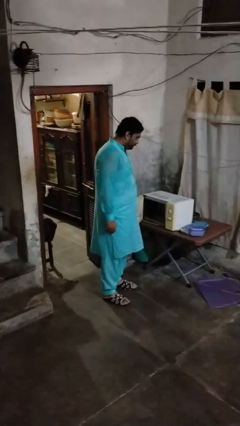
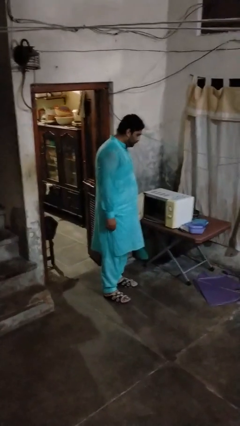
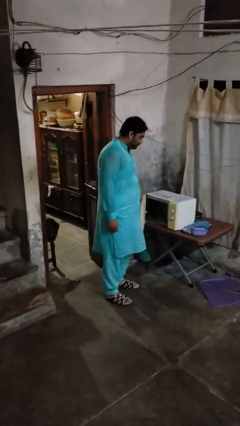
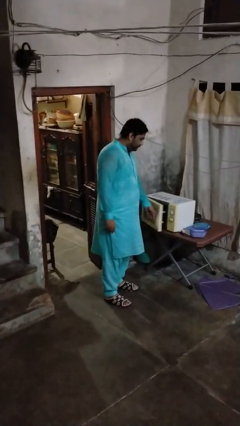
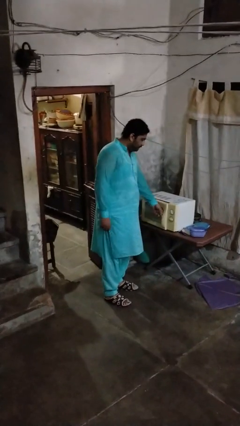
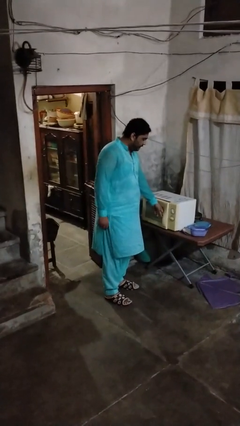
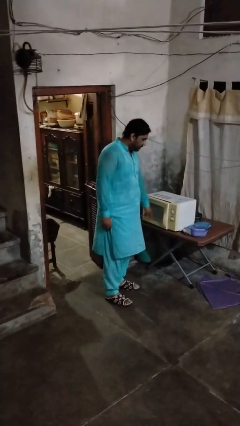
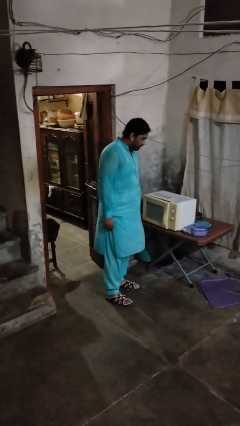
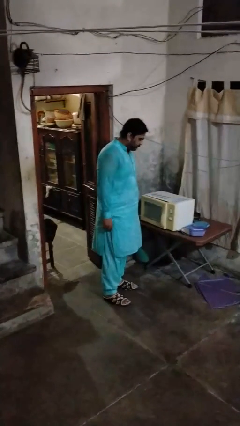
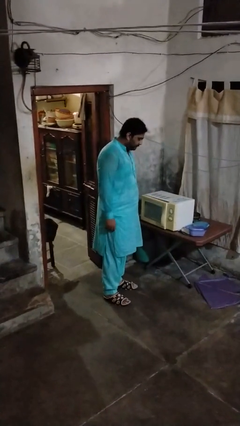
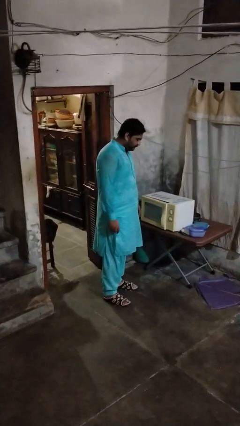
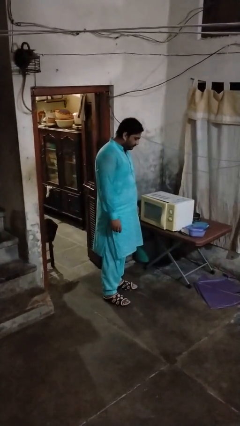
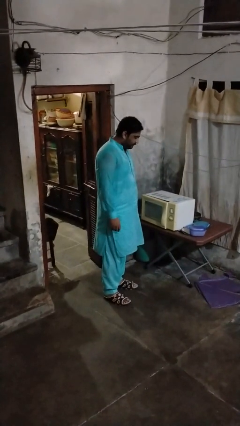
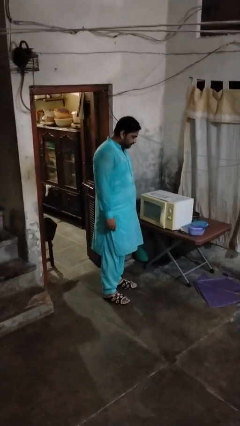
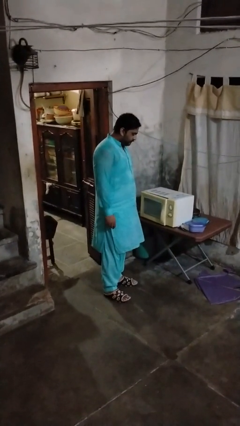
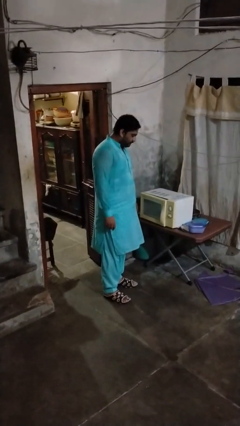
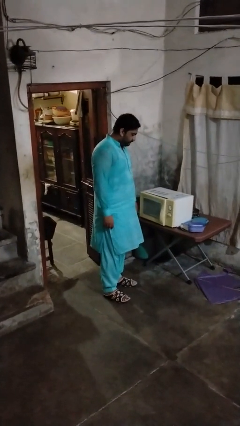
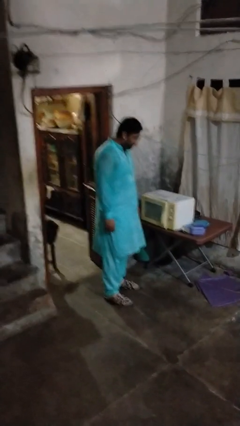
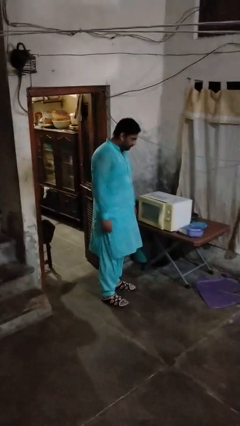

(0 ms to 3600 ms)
person closes microwave

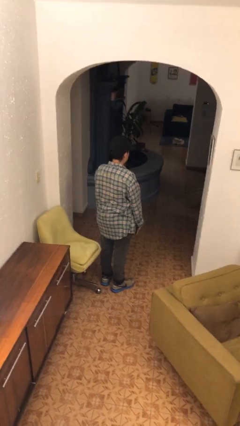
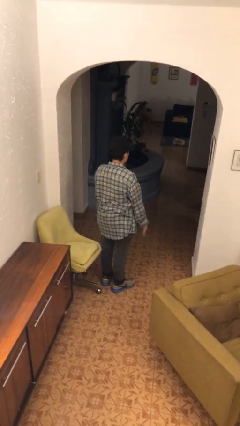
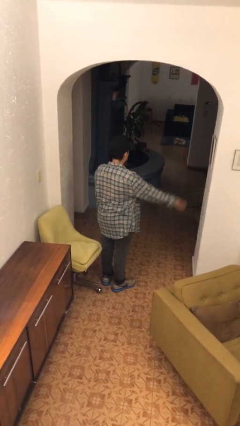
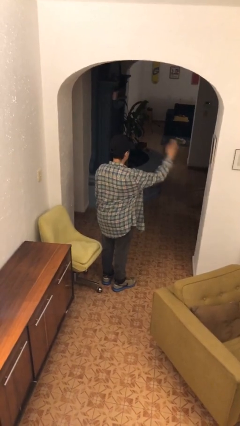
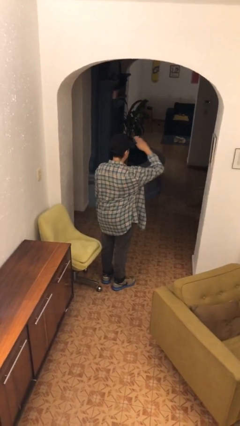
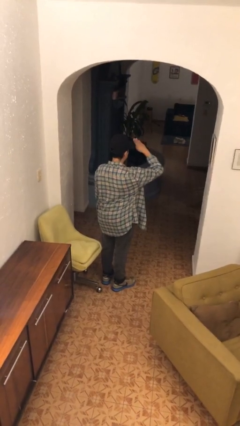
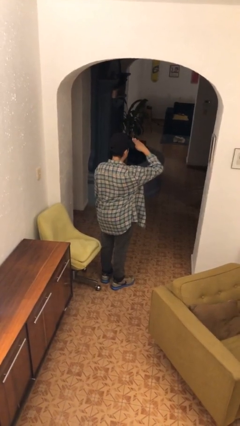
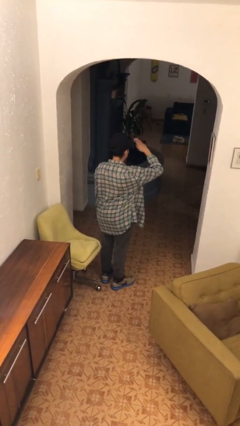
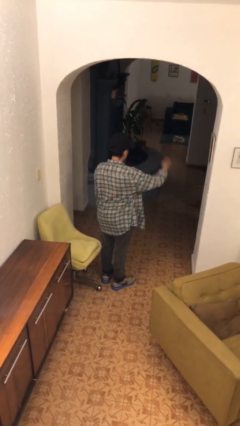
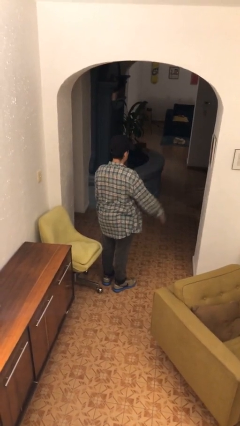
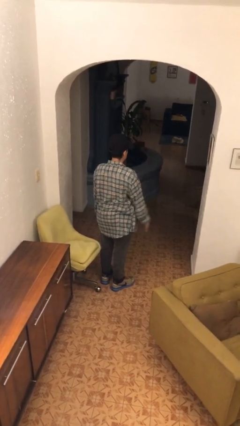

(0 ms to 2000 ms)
person salutes

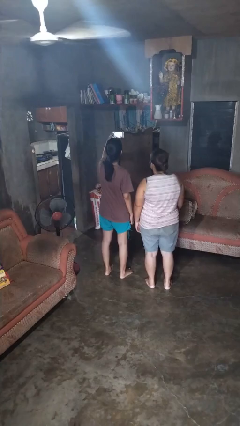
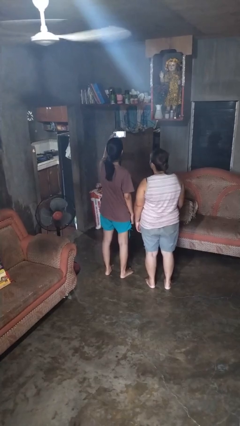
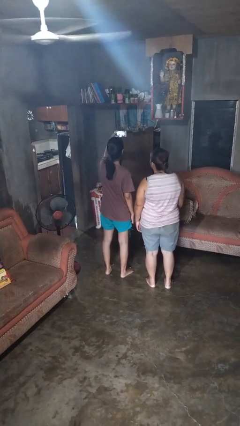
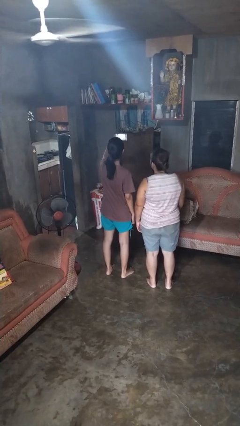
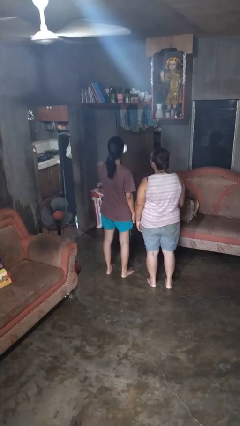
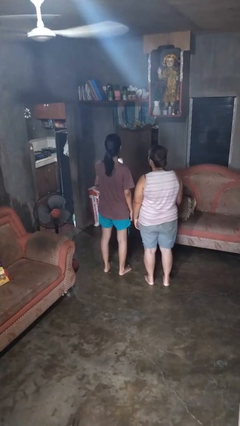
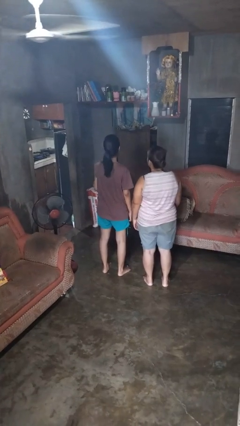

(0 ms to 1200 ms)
person takes selfie with person

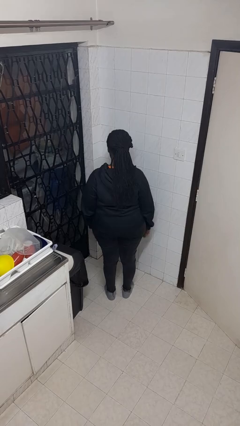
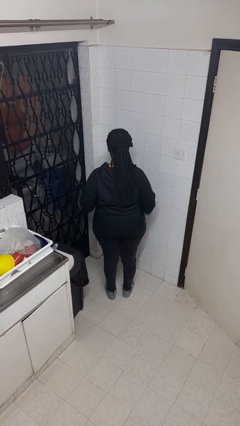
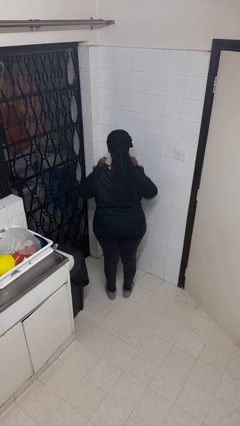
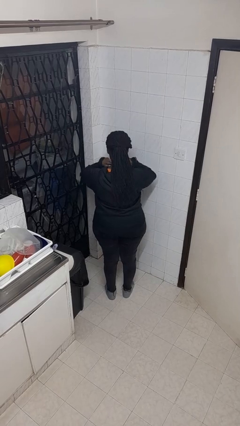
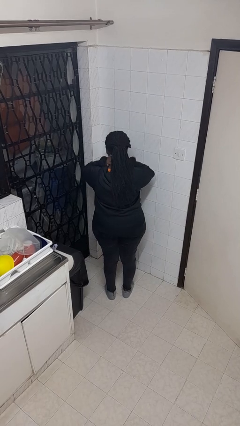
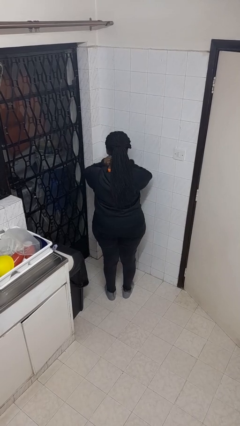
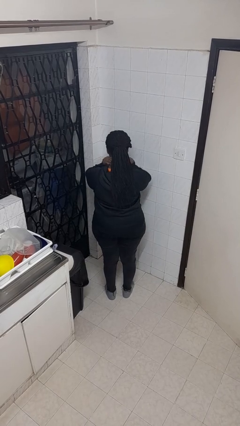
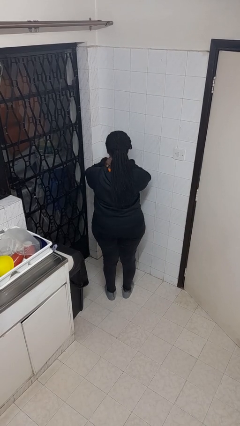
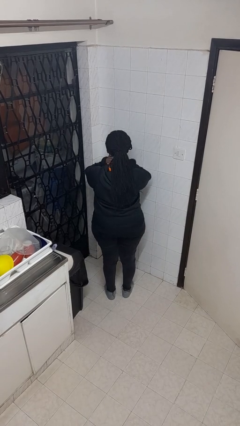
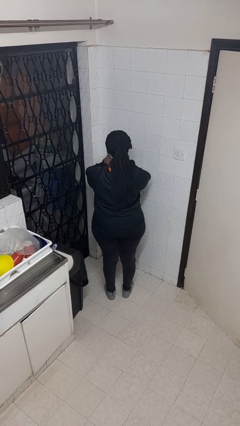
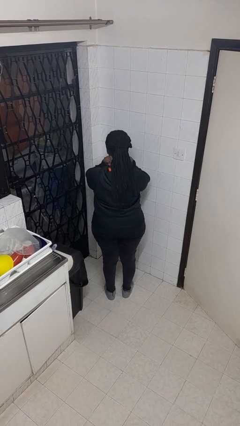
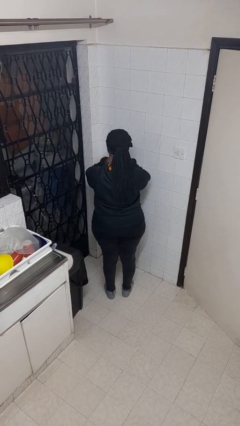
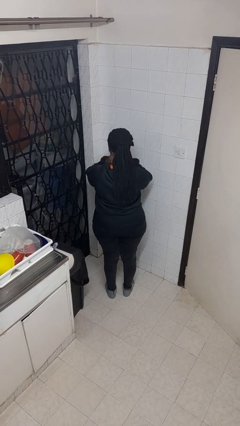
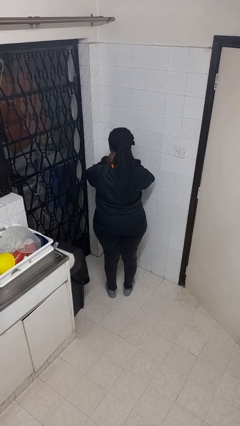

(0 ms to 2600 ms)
person rubs neck

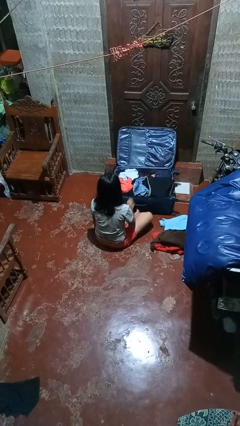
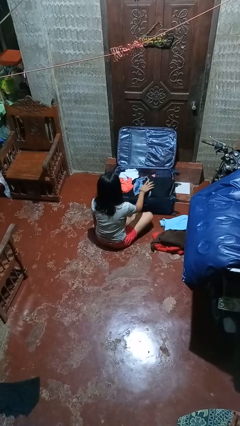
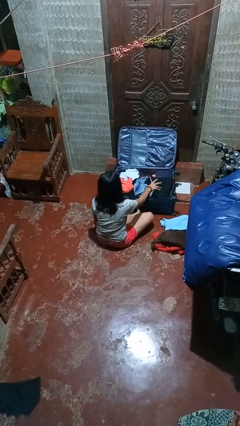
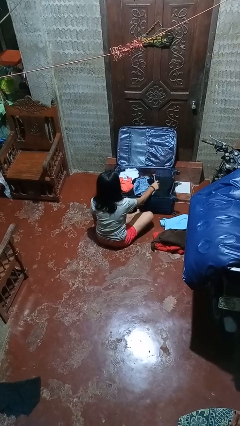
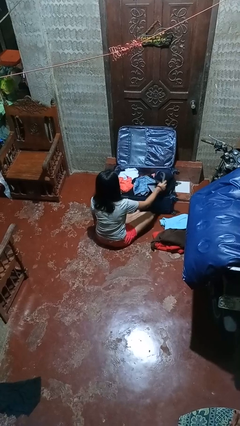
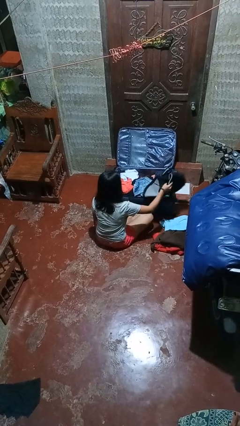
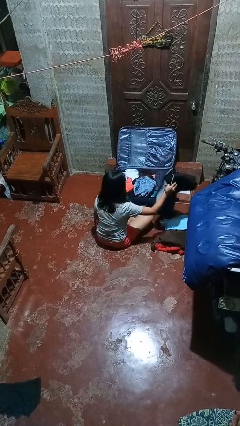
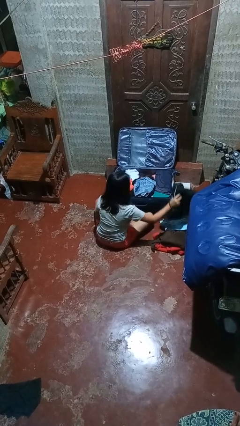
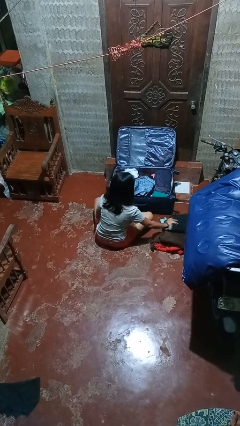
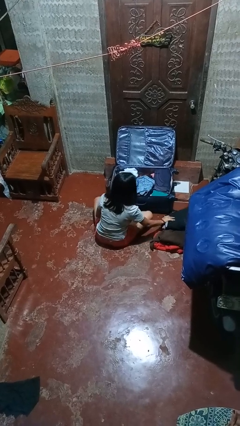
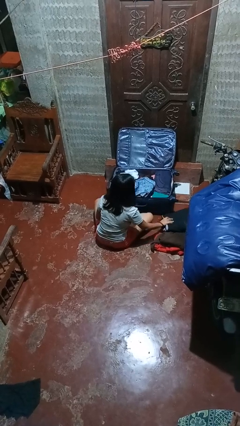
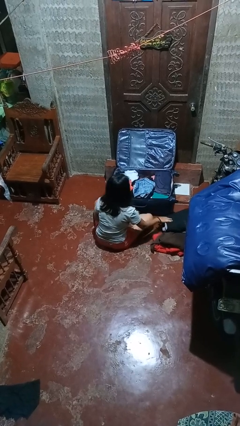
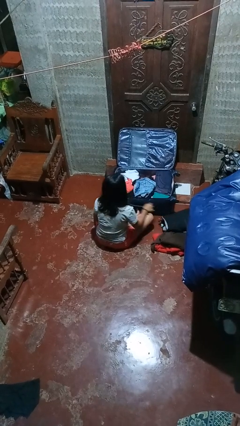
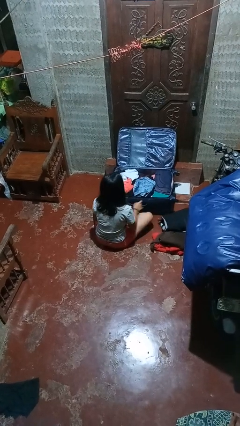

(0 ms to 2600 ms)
person unloads clothes from suitcase

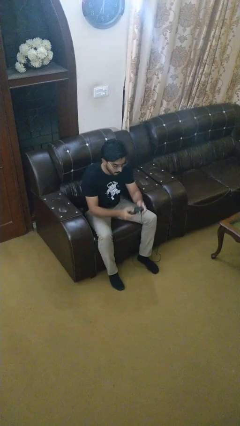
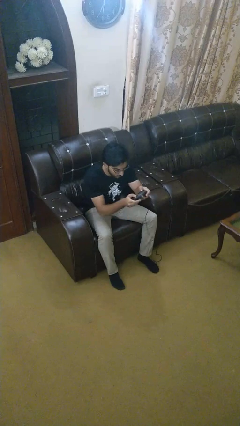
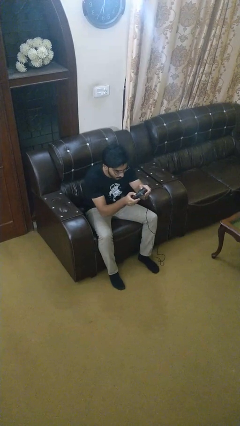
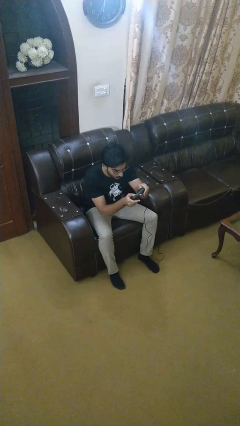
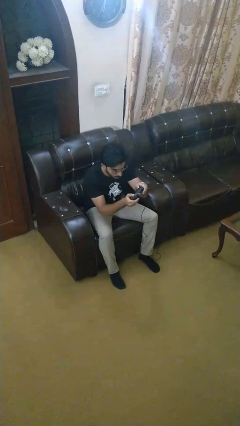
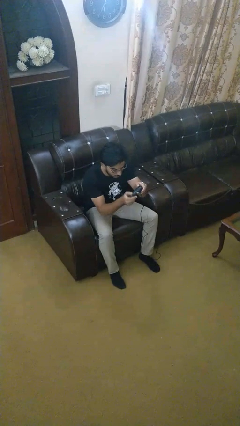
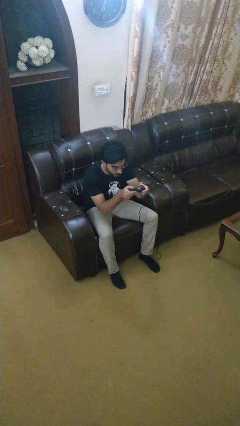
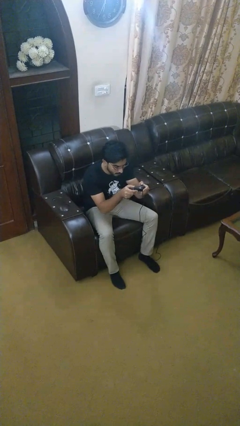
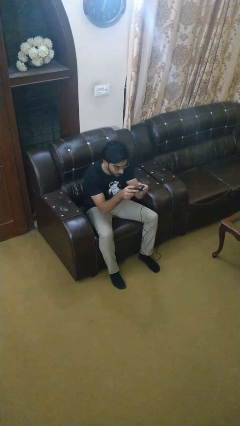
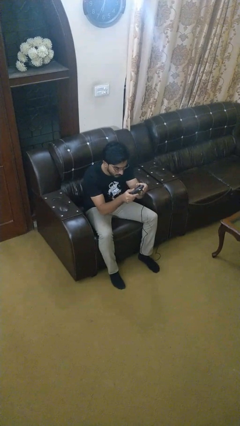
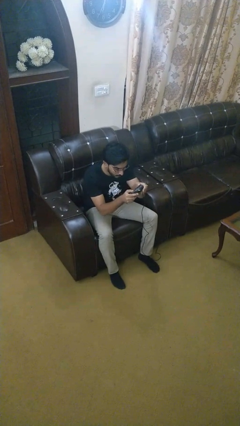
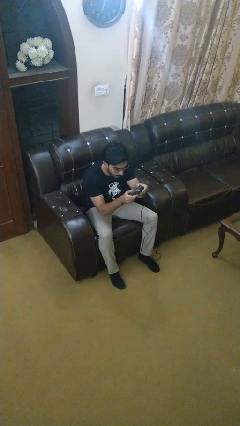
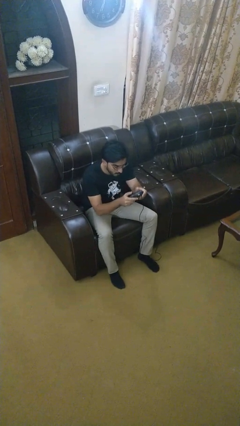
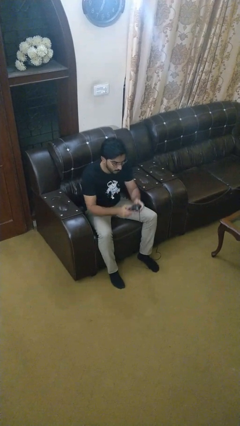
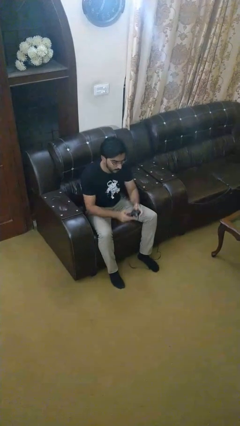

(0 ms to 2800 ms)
person interacts with handheld game

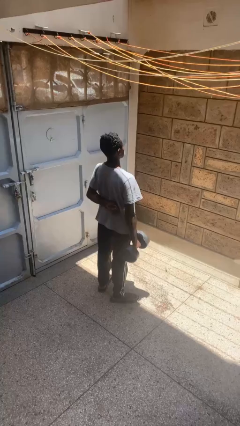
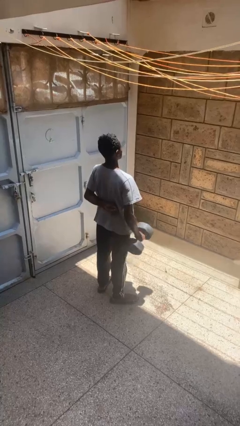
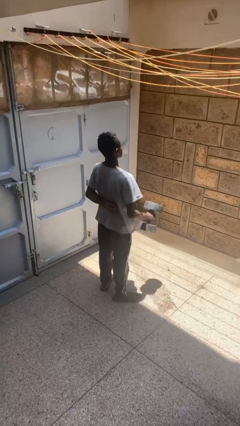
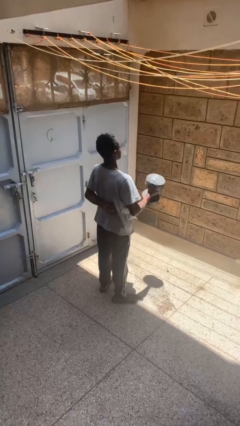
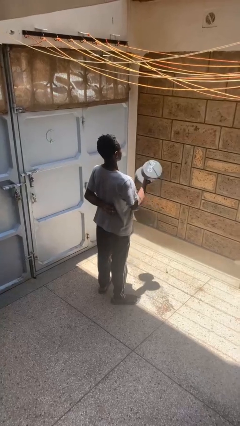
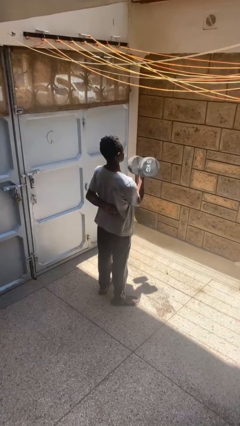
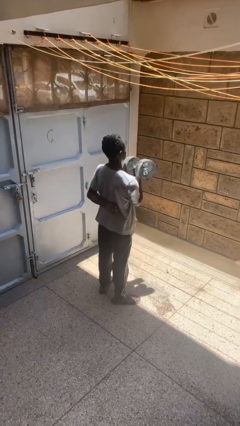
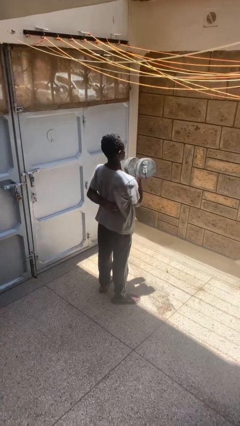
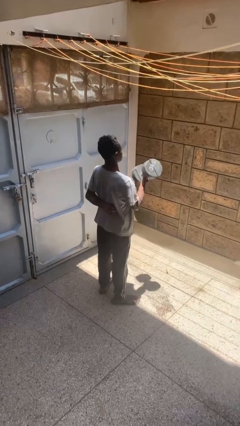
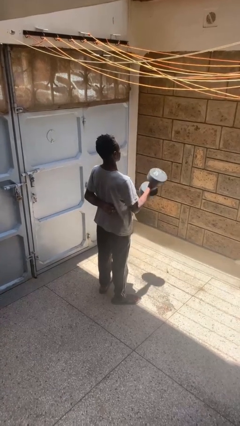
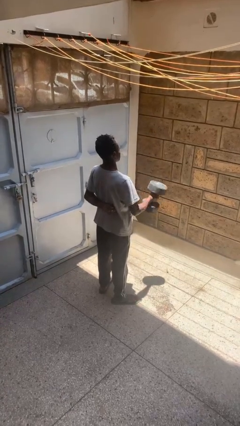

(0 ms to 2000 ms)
person lifts dumbbells
